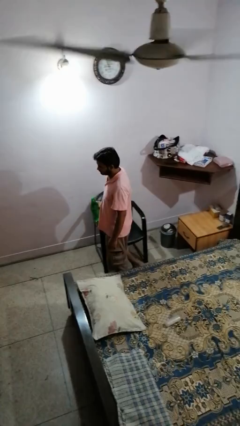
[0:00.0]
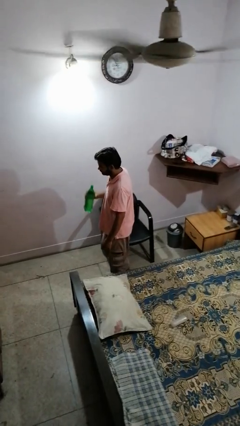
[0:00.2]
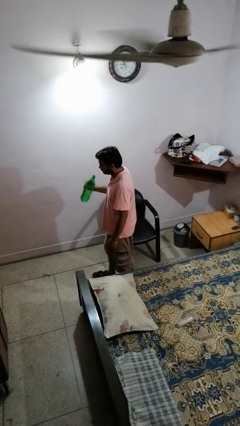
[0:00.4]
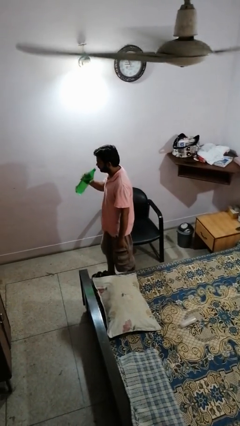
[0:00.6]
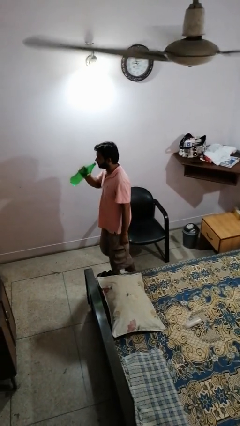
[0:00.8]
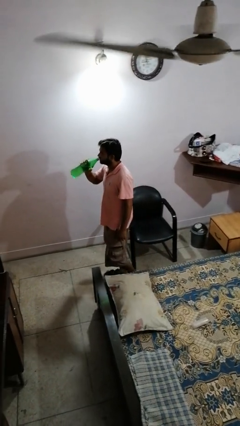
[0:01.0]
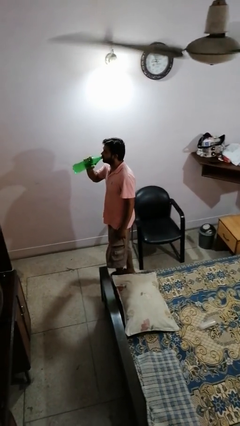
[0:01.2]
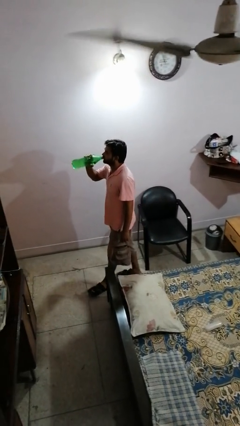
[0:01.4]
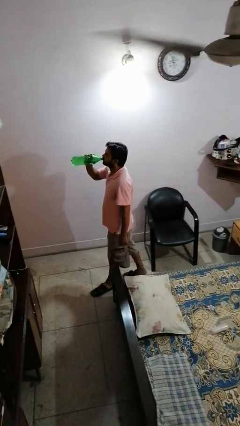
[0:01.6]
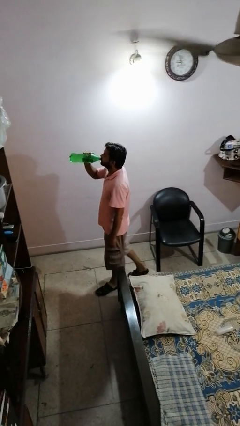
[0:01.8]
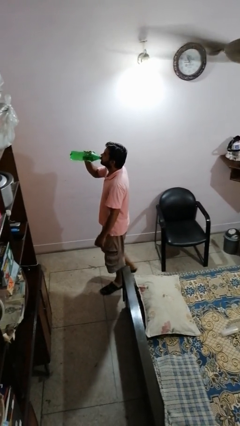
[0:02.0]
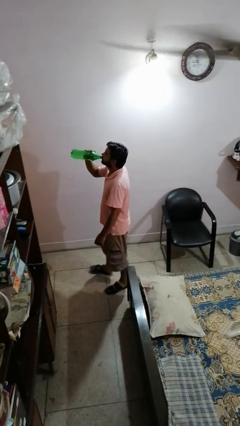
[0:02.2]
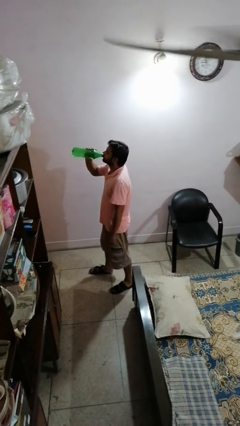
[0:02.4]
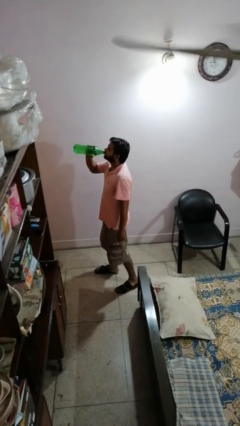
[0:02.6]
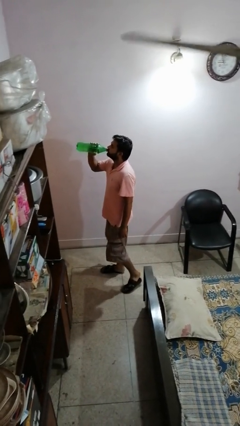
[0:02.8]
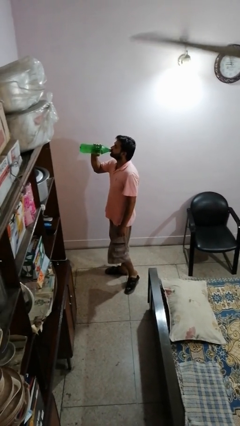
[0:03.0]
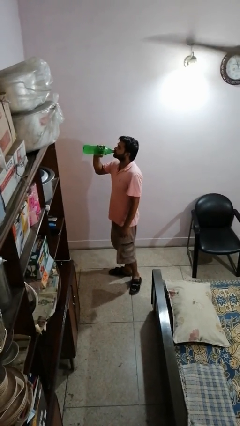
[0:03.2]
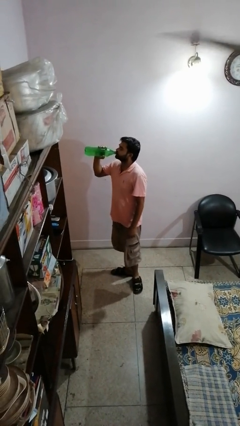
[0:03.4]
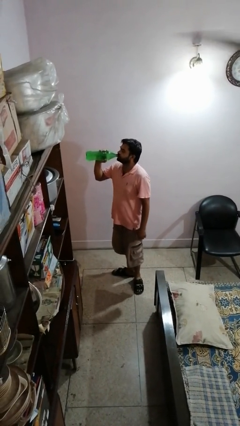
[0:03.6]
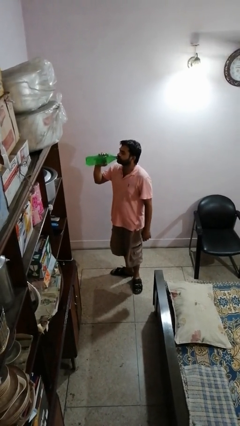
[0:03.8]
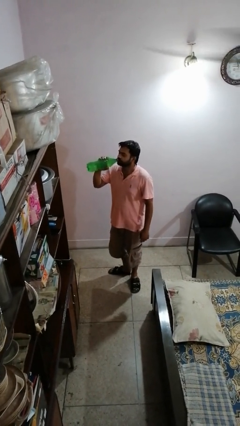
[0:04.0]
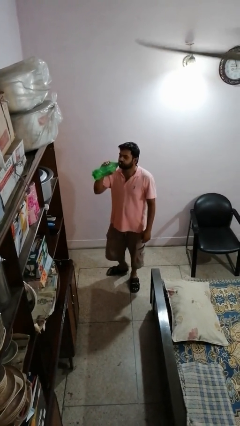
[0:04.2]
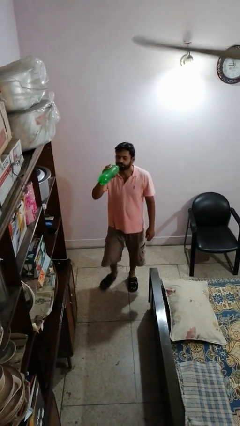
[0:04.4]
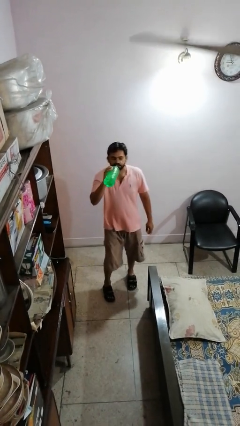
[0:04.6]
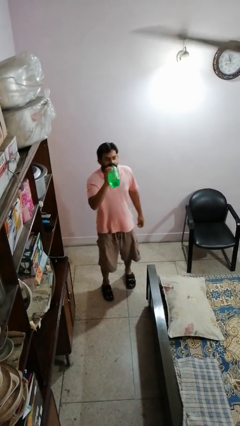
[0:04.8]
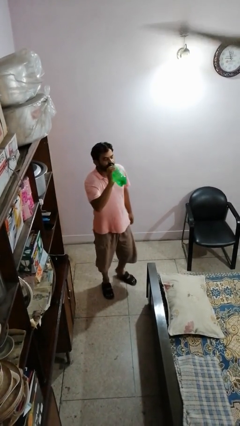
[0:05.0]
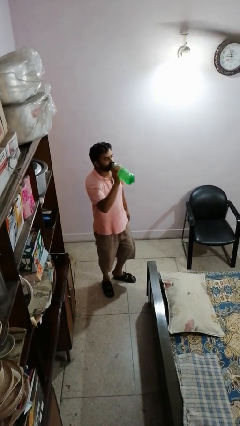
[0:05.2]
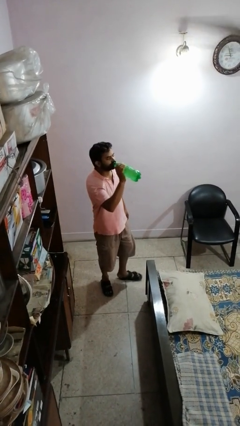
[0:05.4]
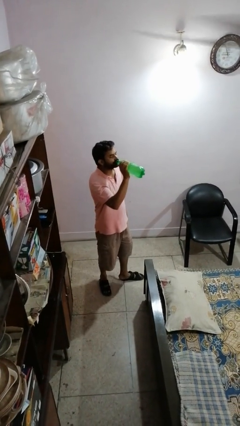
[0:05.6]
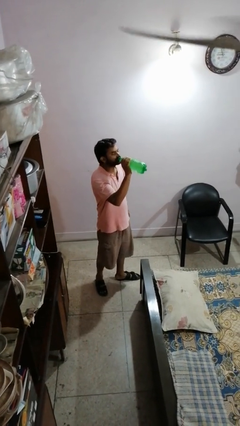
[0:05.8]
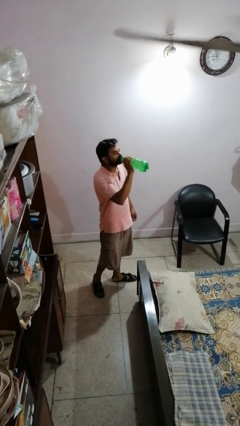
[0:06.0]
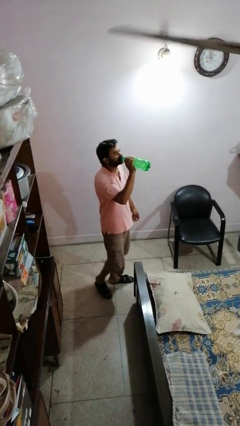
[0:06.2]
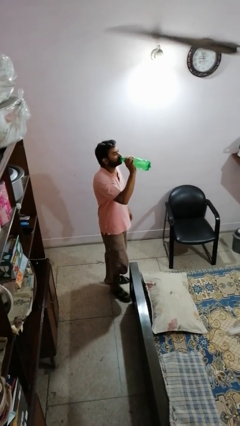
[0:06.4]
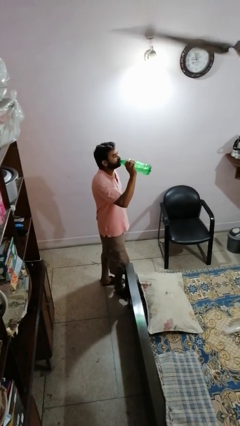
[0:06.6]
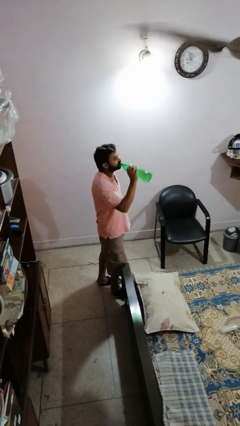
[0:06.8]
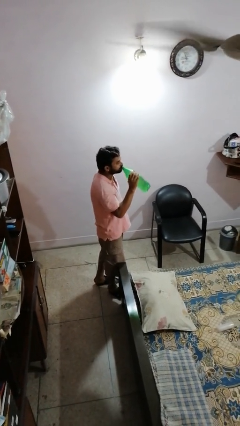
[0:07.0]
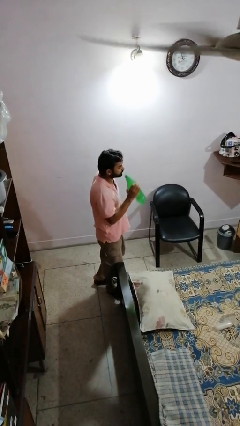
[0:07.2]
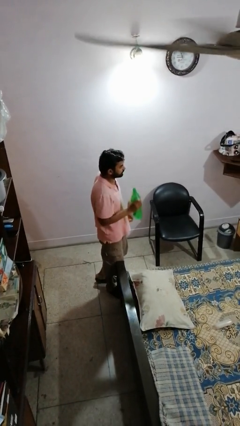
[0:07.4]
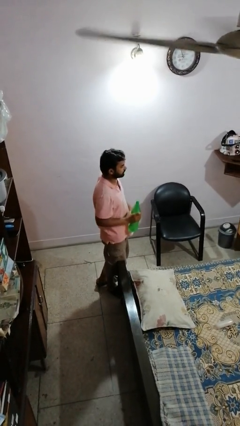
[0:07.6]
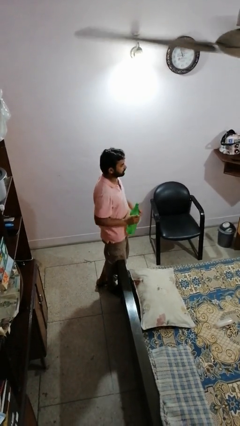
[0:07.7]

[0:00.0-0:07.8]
person drinks from bottle

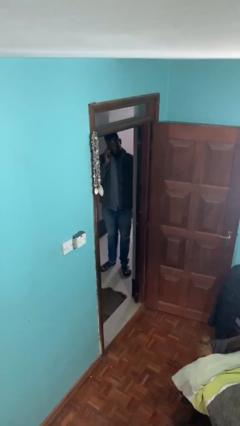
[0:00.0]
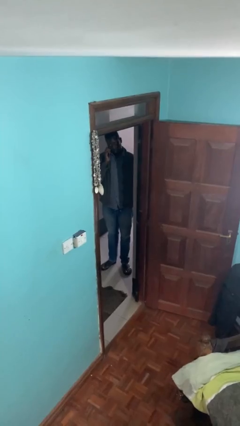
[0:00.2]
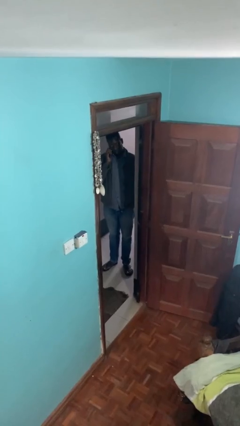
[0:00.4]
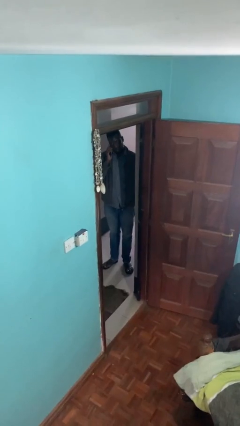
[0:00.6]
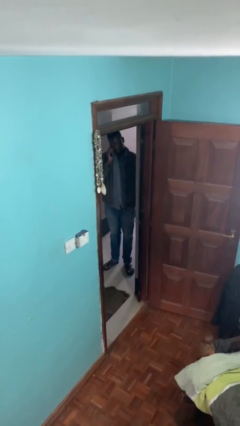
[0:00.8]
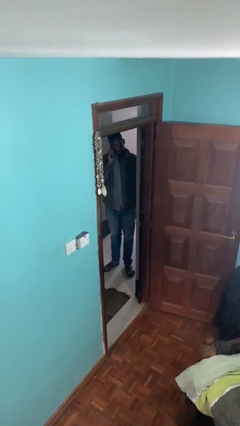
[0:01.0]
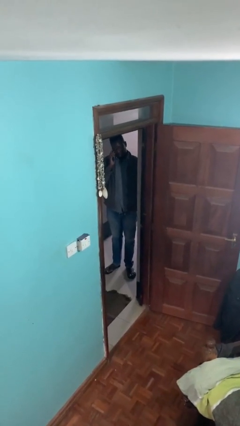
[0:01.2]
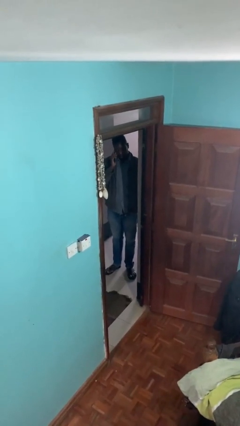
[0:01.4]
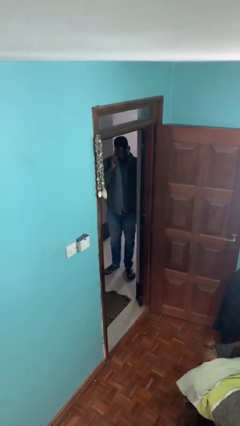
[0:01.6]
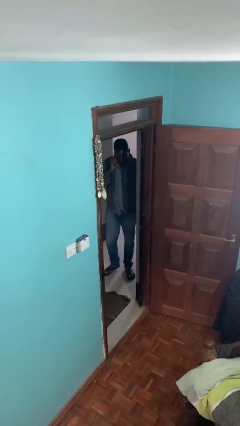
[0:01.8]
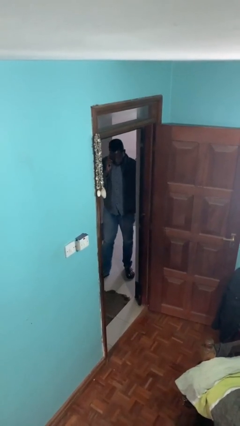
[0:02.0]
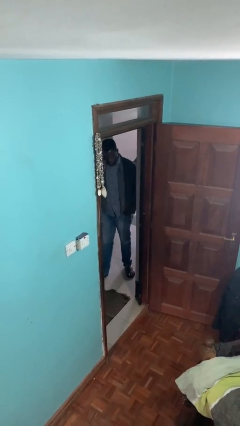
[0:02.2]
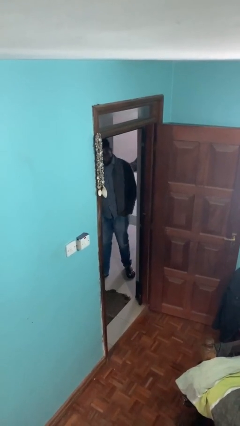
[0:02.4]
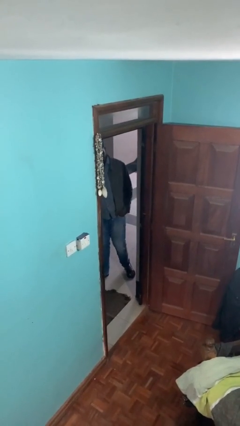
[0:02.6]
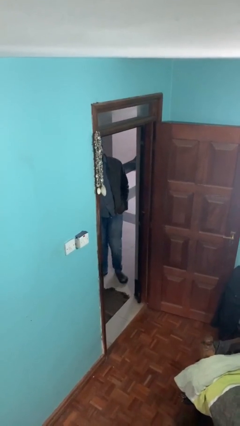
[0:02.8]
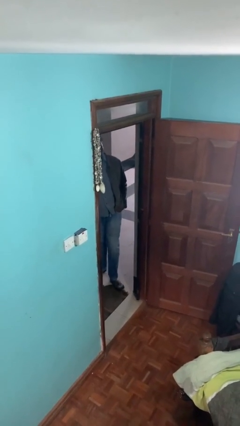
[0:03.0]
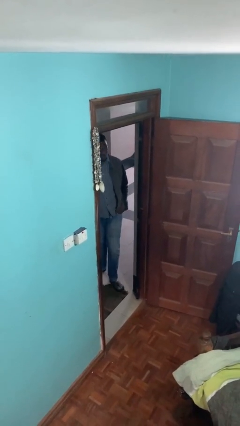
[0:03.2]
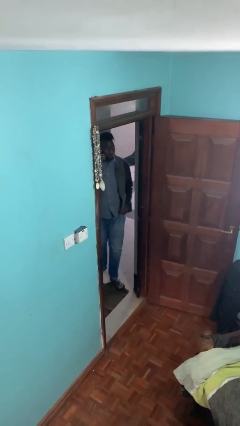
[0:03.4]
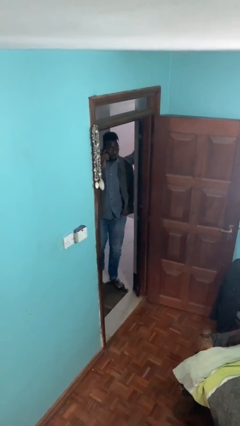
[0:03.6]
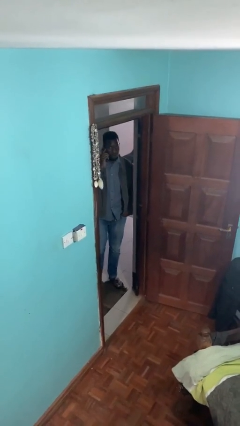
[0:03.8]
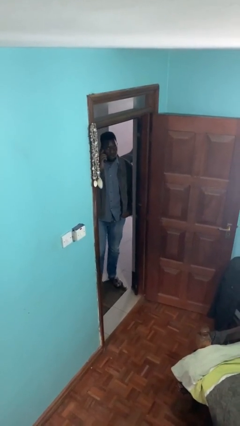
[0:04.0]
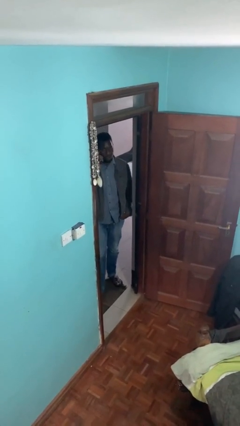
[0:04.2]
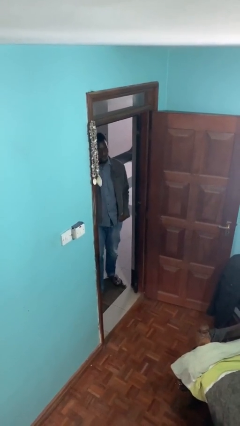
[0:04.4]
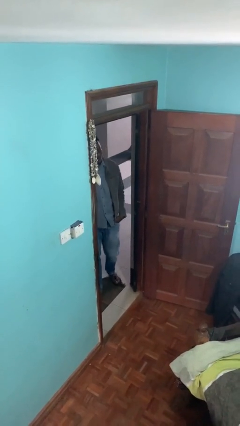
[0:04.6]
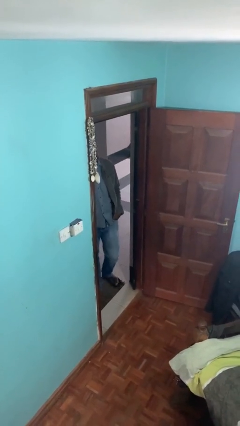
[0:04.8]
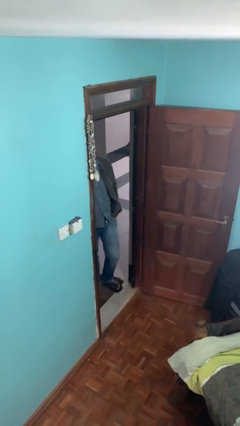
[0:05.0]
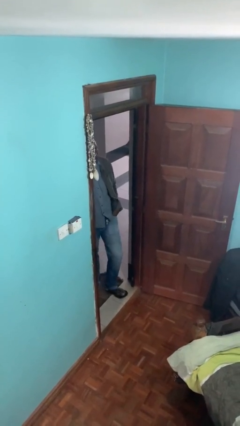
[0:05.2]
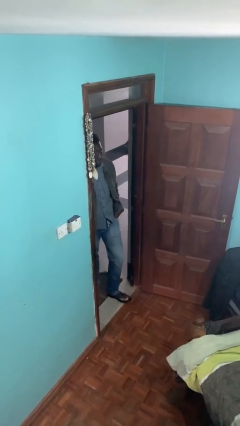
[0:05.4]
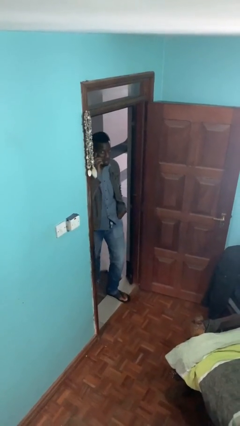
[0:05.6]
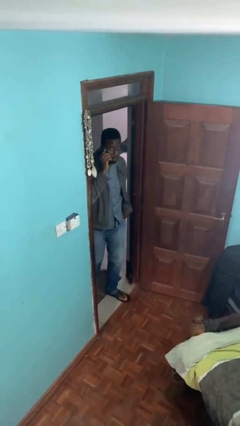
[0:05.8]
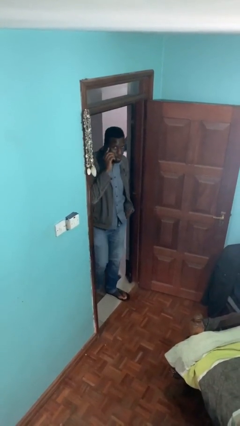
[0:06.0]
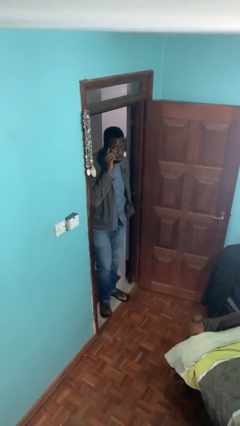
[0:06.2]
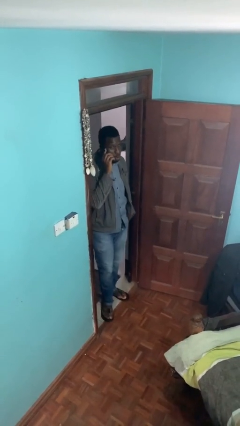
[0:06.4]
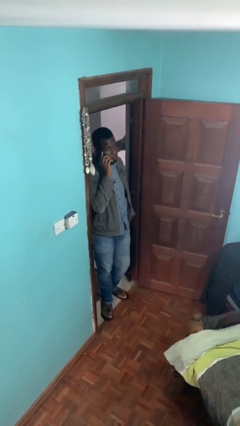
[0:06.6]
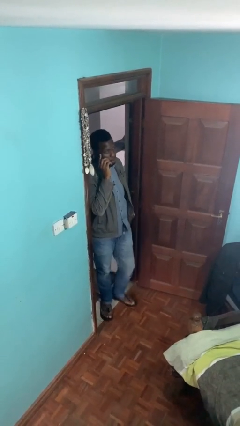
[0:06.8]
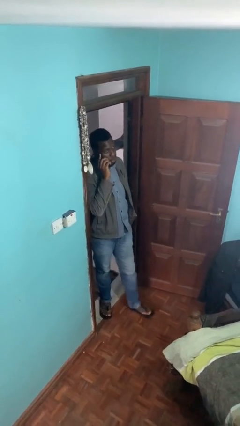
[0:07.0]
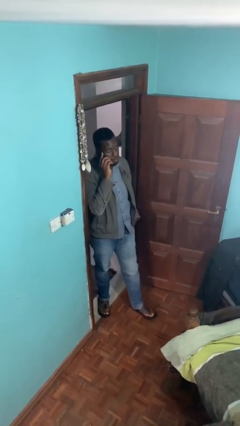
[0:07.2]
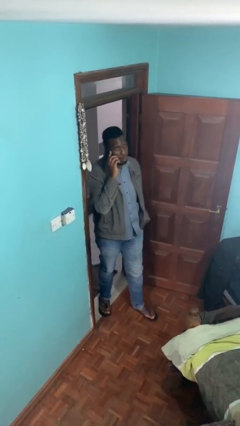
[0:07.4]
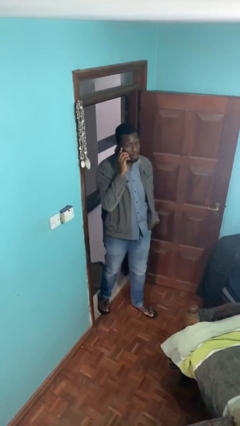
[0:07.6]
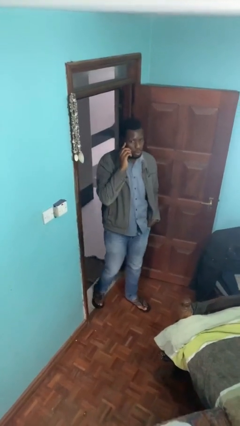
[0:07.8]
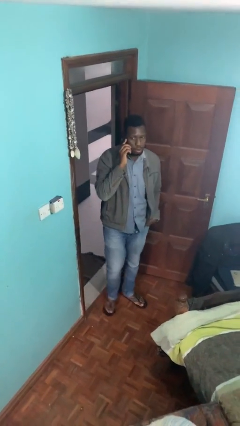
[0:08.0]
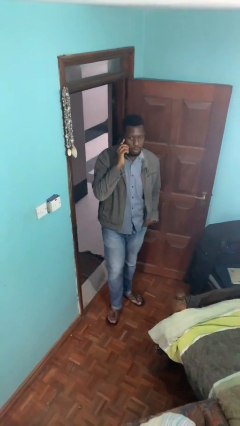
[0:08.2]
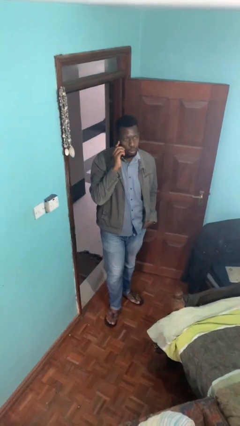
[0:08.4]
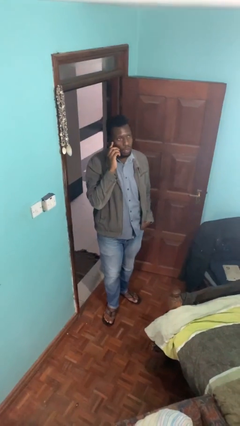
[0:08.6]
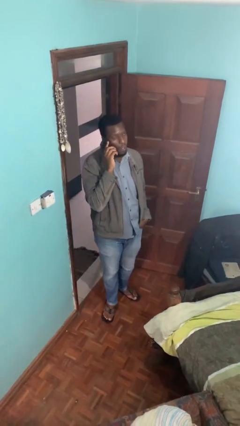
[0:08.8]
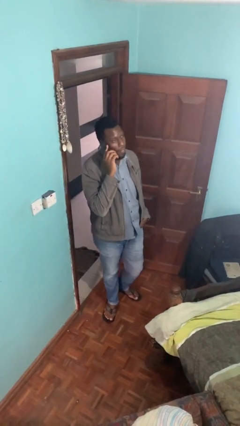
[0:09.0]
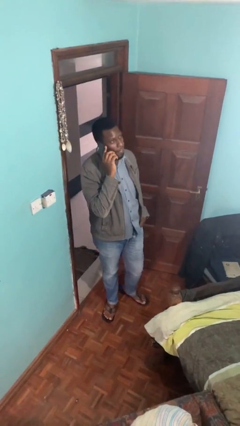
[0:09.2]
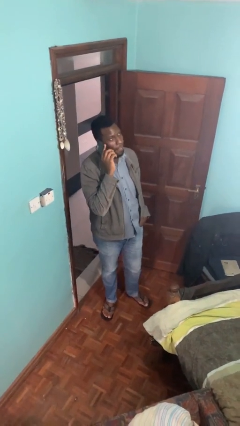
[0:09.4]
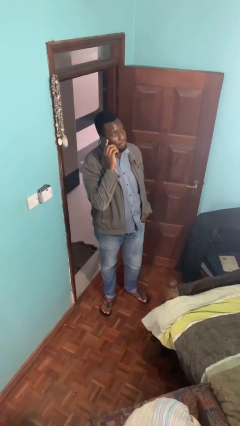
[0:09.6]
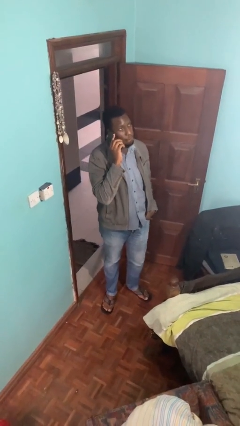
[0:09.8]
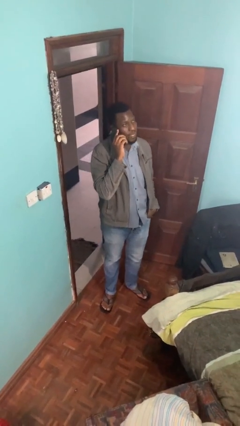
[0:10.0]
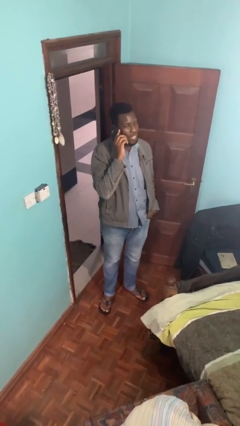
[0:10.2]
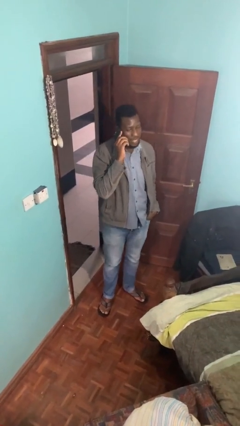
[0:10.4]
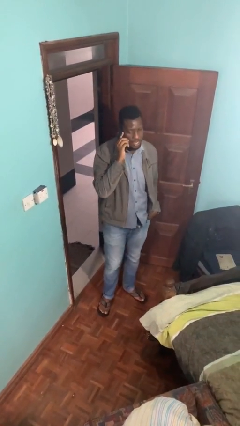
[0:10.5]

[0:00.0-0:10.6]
person enters scene through structure
